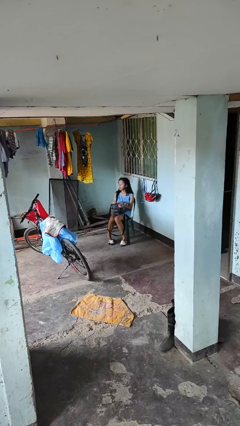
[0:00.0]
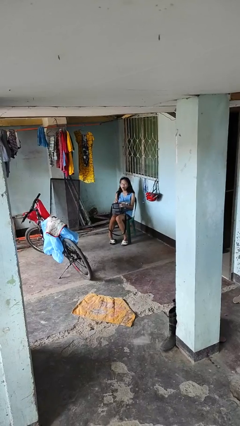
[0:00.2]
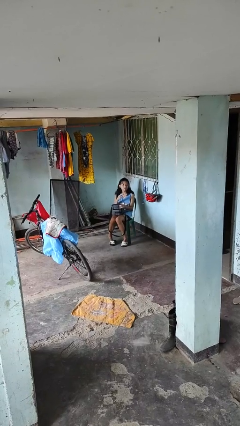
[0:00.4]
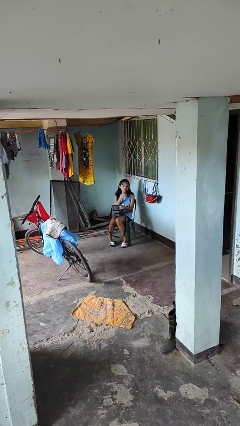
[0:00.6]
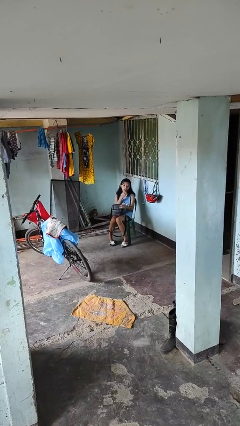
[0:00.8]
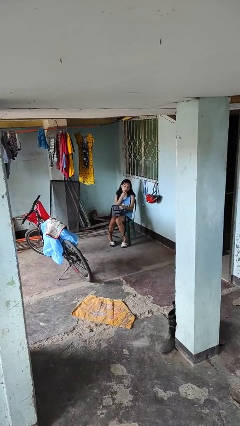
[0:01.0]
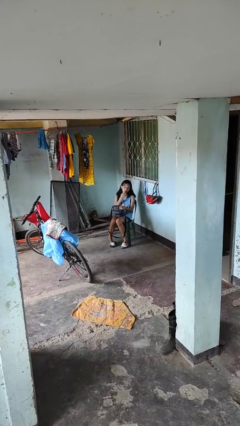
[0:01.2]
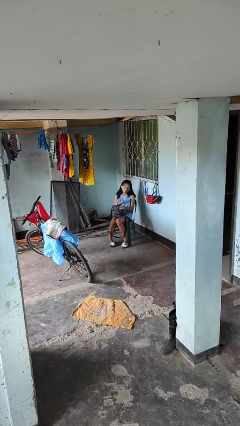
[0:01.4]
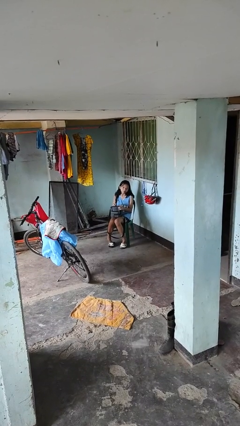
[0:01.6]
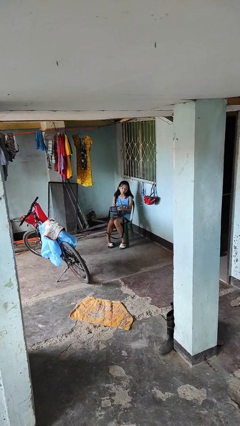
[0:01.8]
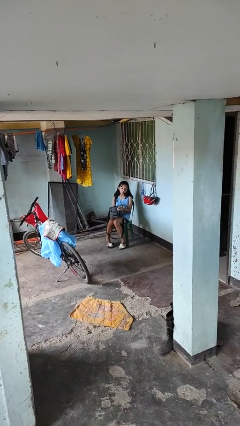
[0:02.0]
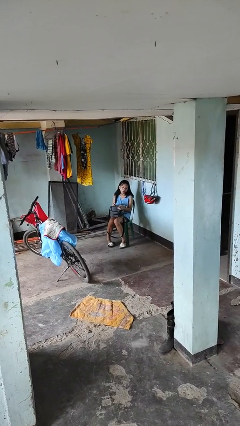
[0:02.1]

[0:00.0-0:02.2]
person eats snack from bag

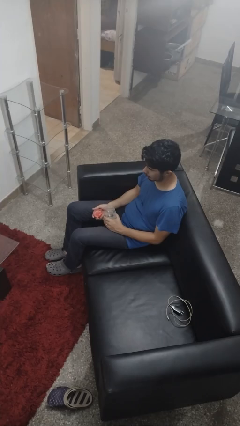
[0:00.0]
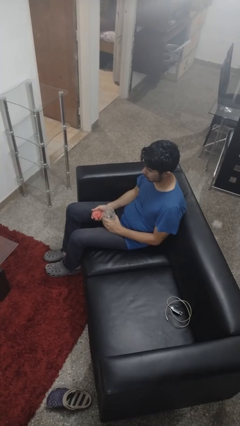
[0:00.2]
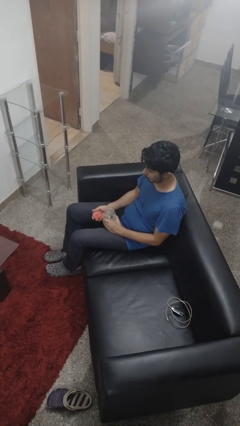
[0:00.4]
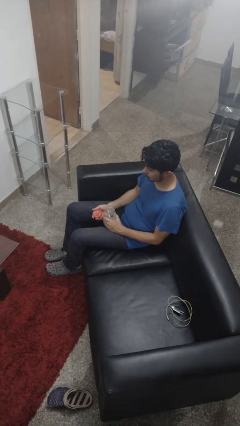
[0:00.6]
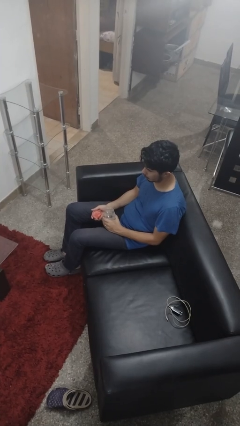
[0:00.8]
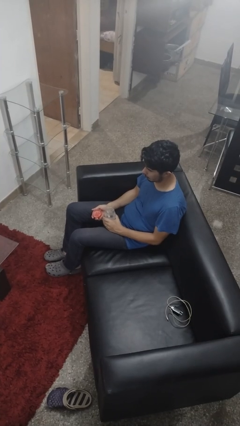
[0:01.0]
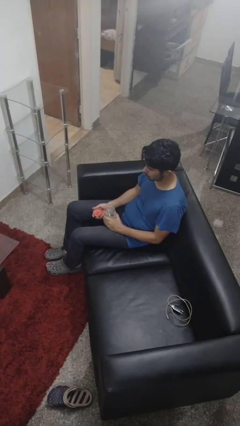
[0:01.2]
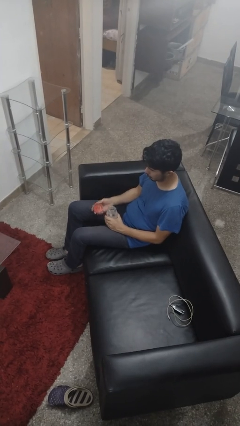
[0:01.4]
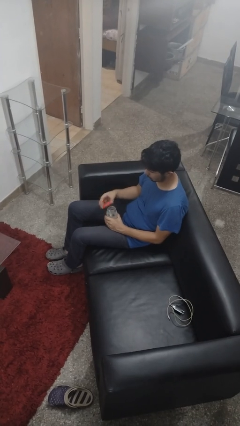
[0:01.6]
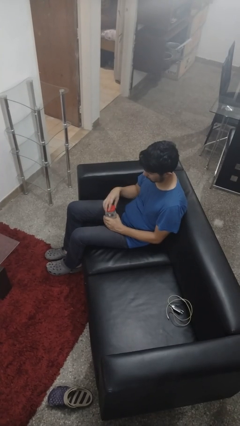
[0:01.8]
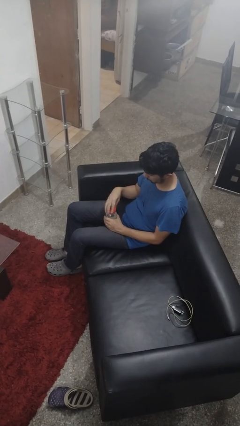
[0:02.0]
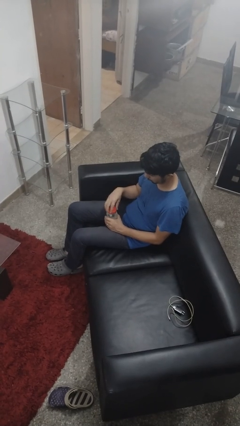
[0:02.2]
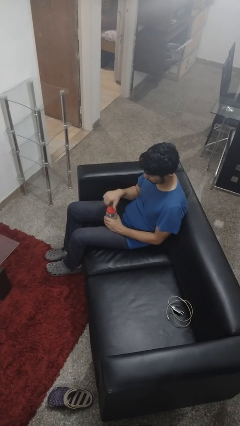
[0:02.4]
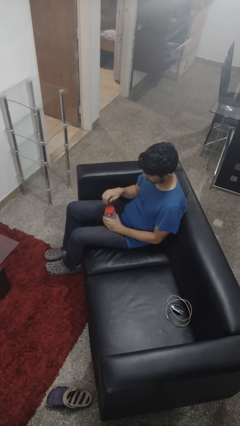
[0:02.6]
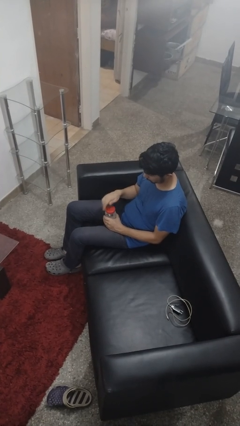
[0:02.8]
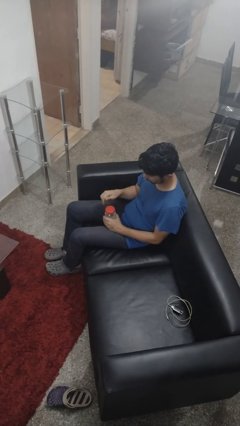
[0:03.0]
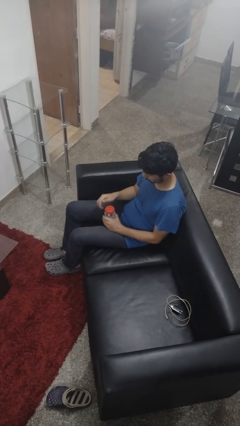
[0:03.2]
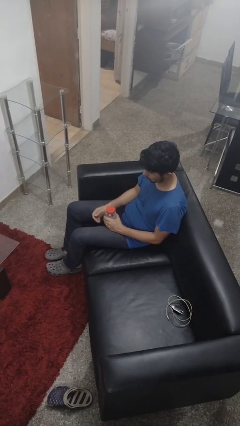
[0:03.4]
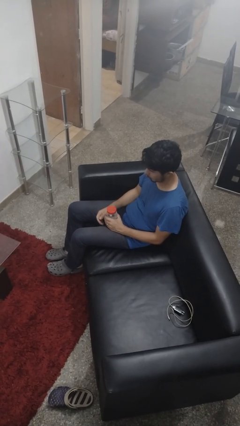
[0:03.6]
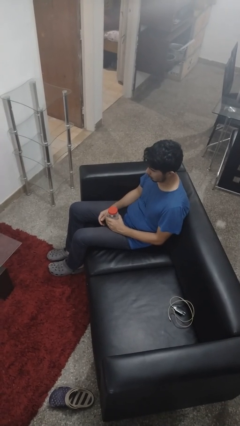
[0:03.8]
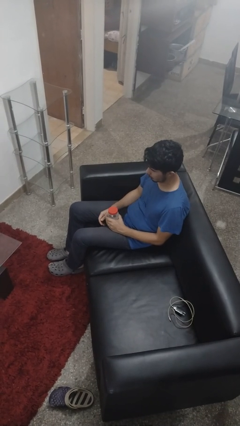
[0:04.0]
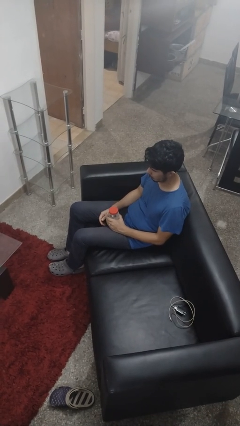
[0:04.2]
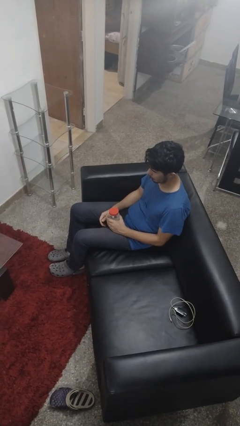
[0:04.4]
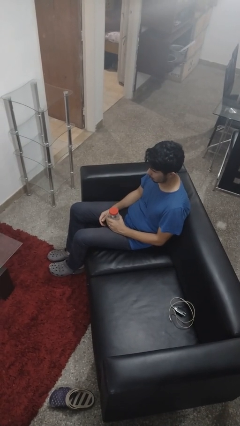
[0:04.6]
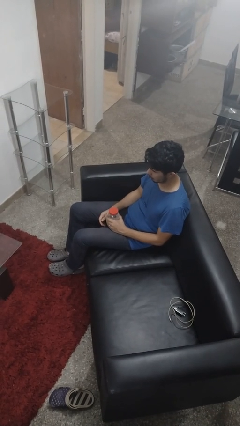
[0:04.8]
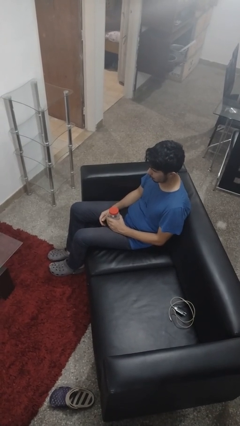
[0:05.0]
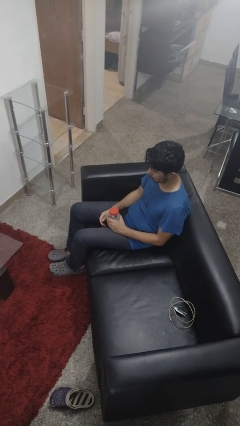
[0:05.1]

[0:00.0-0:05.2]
person closes jar

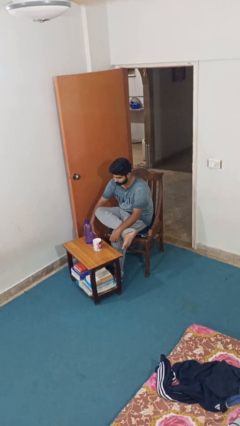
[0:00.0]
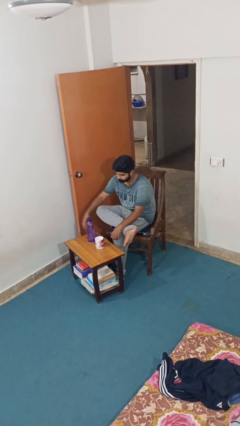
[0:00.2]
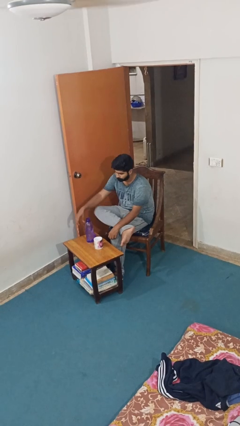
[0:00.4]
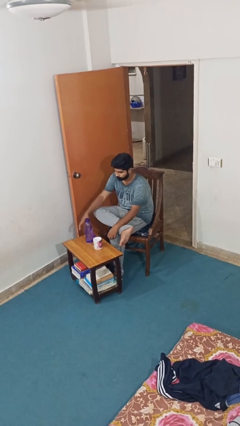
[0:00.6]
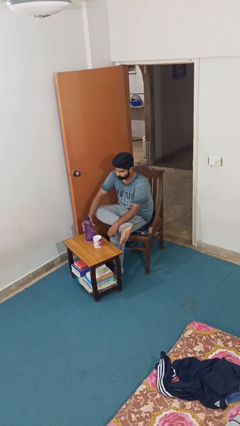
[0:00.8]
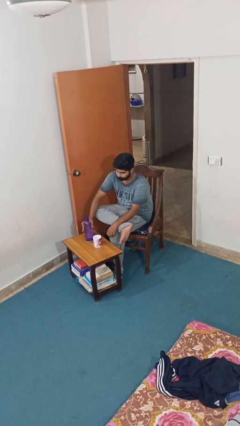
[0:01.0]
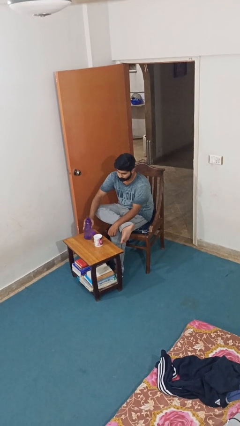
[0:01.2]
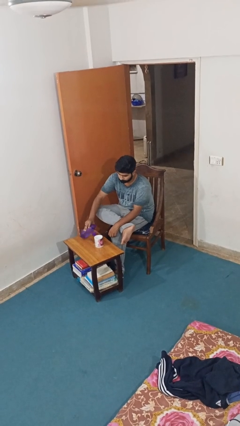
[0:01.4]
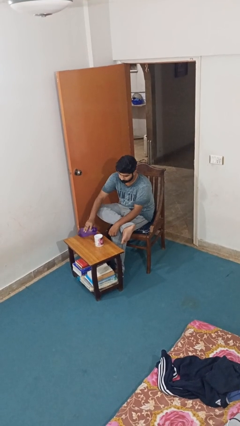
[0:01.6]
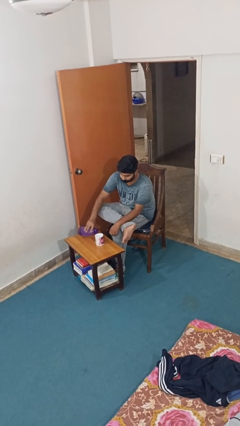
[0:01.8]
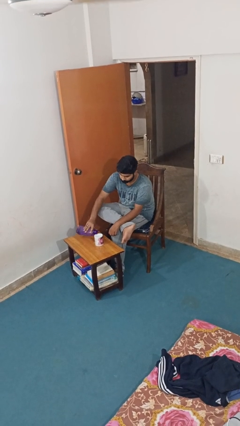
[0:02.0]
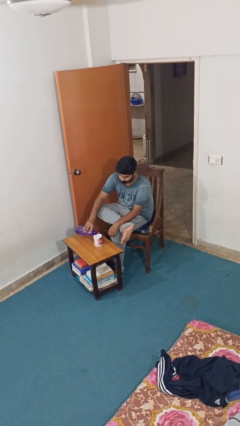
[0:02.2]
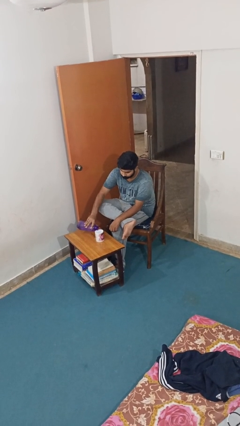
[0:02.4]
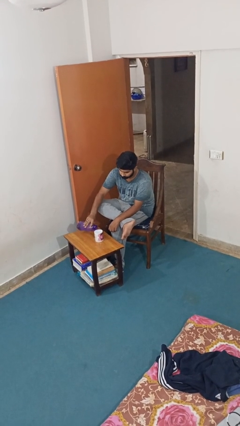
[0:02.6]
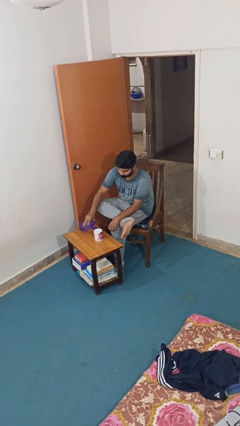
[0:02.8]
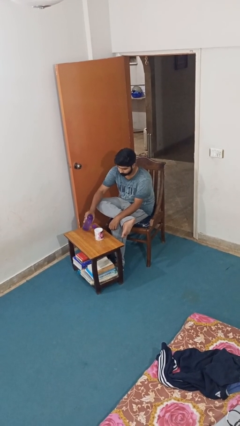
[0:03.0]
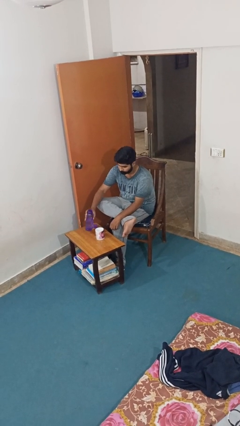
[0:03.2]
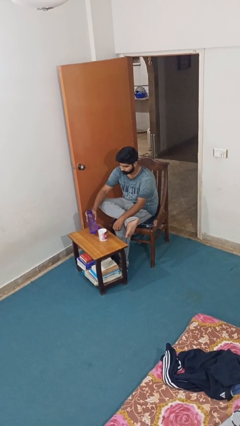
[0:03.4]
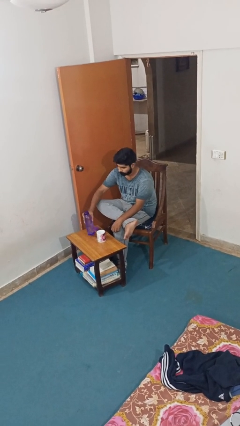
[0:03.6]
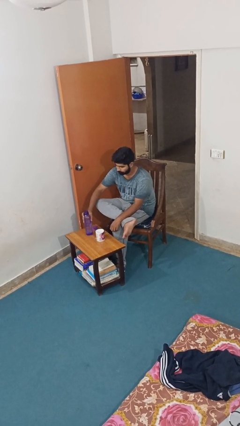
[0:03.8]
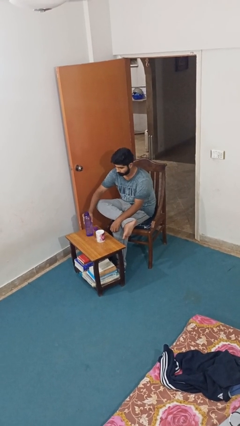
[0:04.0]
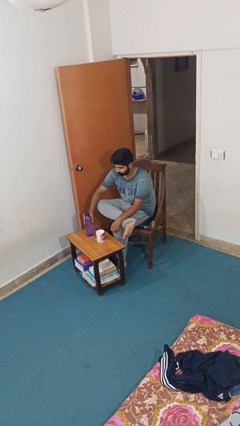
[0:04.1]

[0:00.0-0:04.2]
person pours liquid into cup

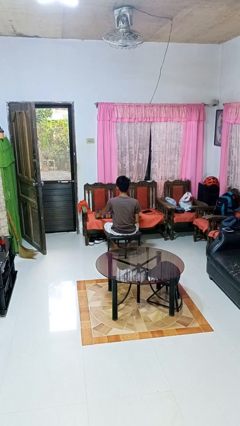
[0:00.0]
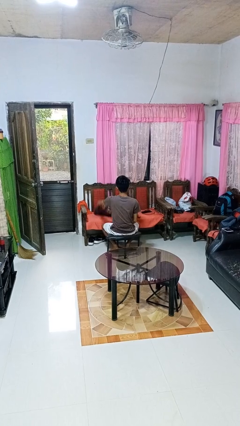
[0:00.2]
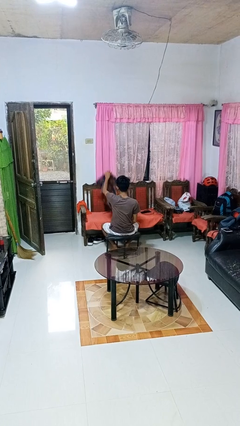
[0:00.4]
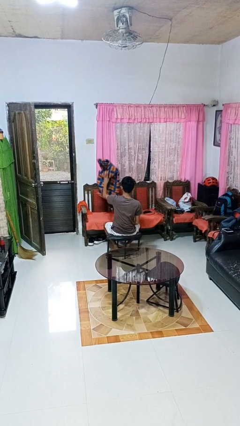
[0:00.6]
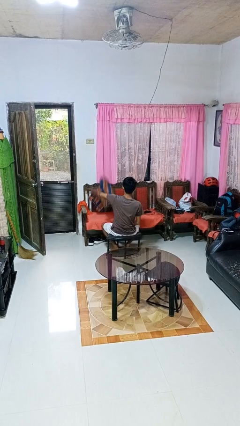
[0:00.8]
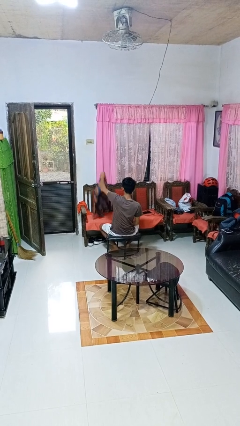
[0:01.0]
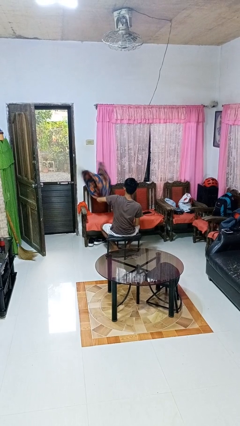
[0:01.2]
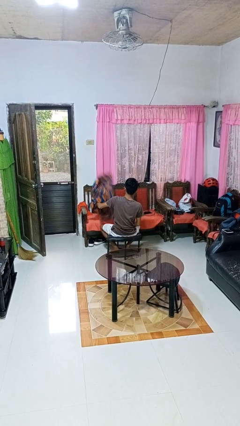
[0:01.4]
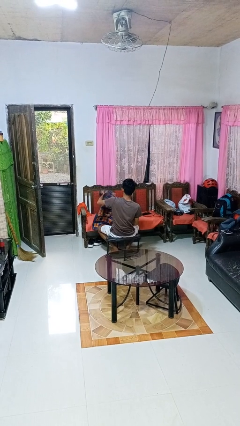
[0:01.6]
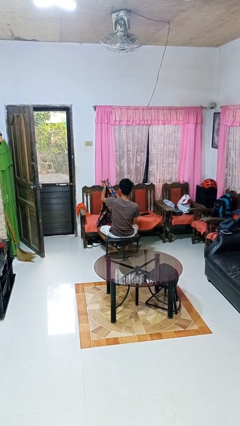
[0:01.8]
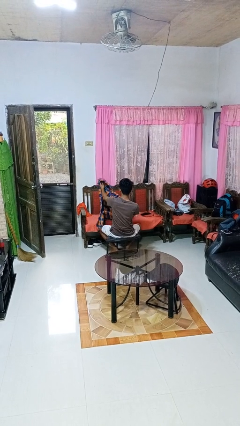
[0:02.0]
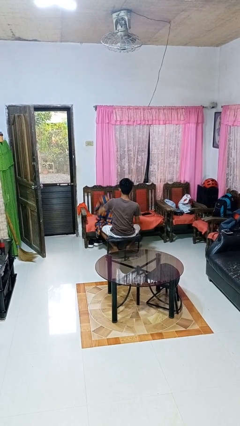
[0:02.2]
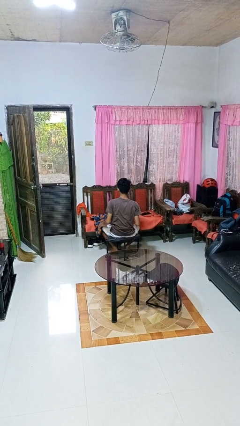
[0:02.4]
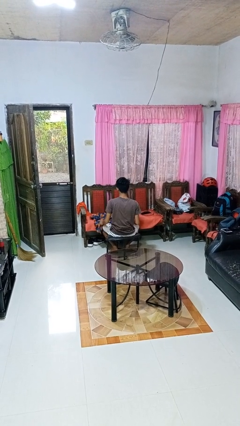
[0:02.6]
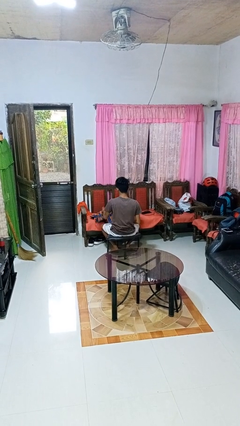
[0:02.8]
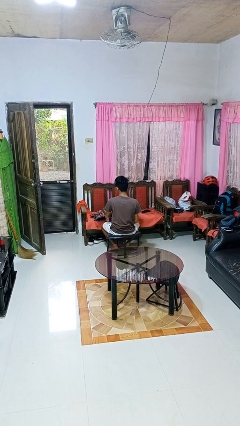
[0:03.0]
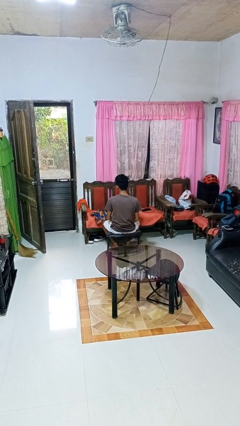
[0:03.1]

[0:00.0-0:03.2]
person unfolds blanket

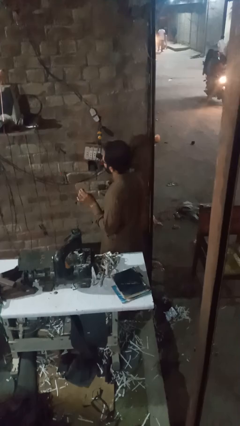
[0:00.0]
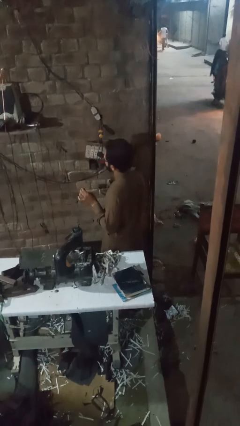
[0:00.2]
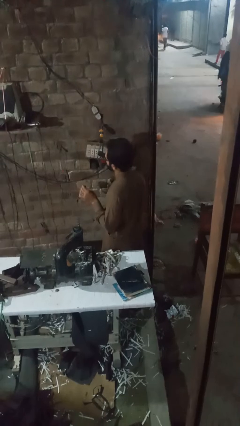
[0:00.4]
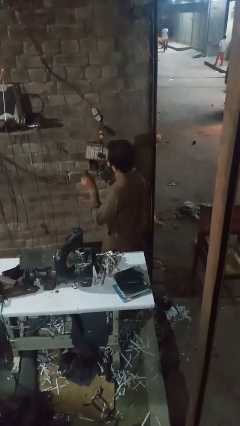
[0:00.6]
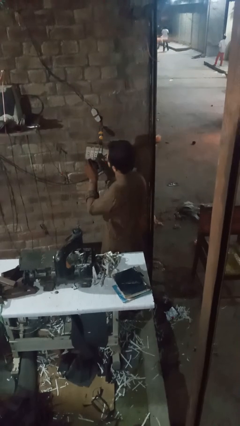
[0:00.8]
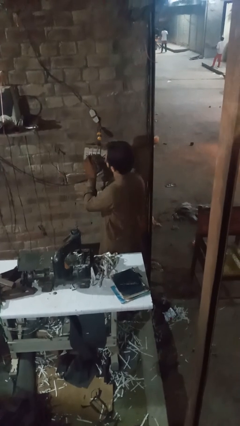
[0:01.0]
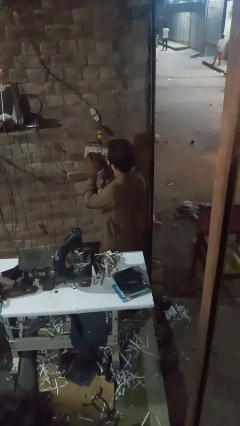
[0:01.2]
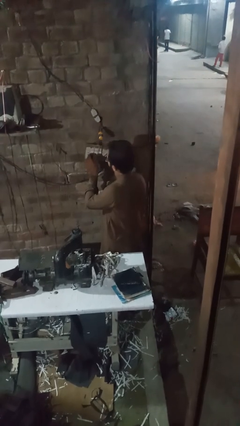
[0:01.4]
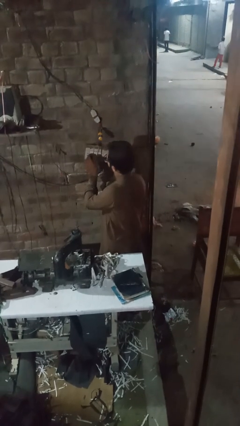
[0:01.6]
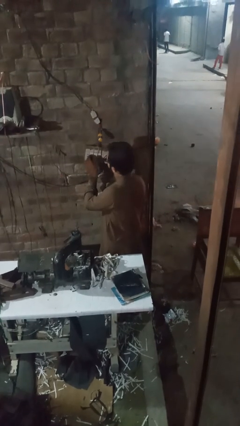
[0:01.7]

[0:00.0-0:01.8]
person plugs into electrical socket

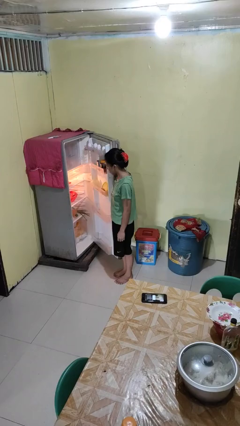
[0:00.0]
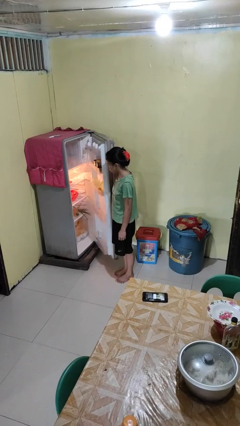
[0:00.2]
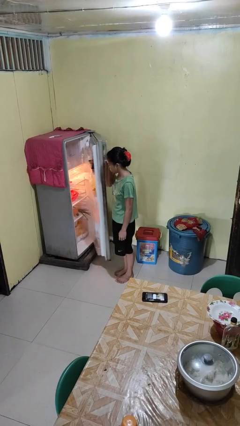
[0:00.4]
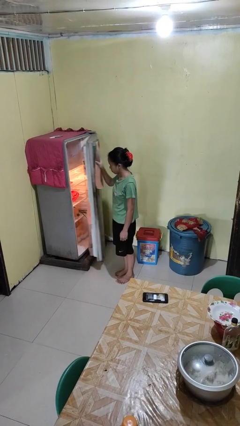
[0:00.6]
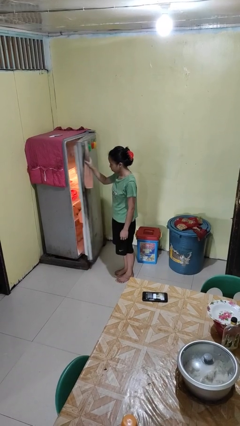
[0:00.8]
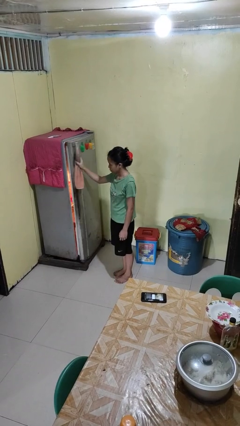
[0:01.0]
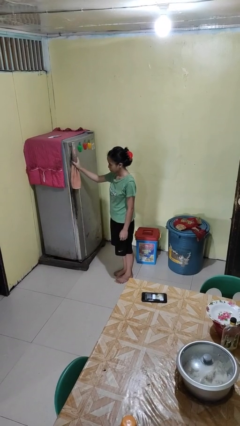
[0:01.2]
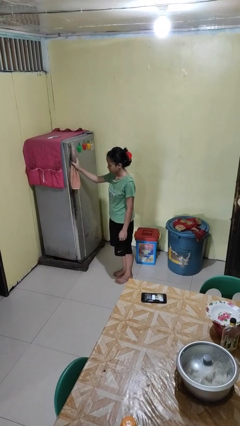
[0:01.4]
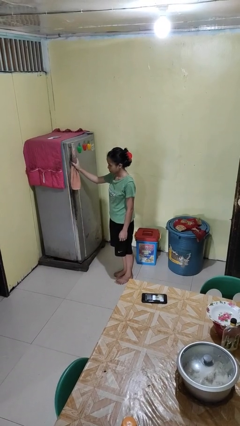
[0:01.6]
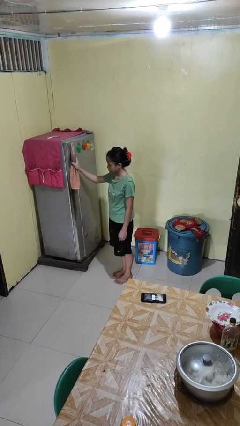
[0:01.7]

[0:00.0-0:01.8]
person closes refrigerator
